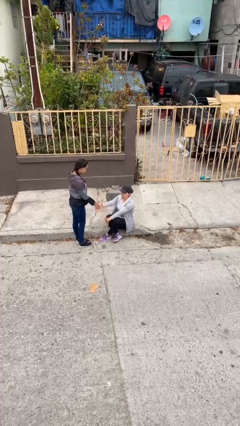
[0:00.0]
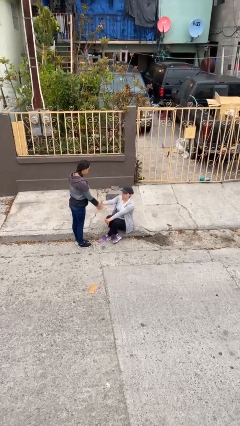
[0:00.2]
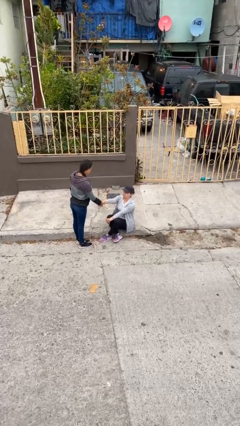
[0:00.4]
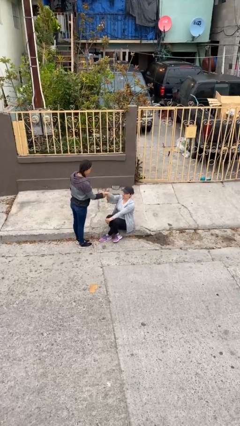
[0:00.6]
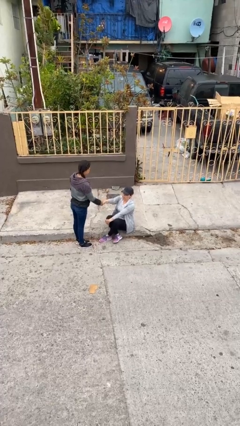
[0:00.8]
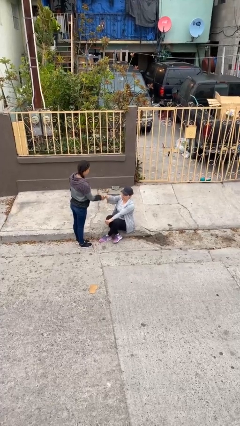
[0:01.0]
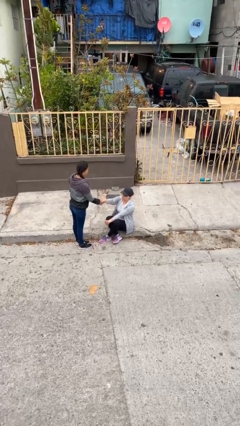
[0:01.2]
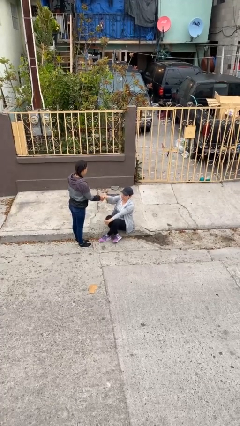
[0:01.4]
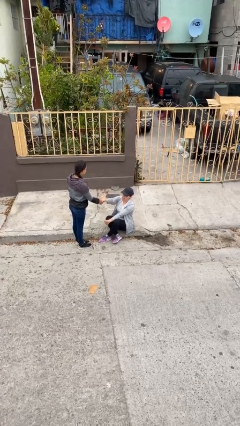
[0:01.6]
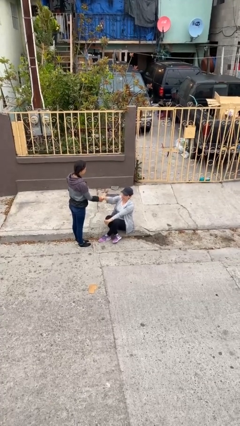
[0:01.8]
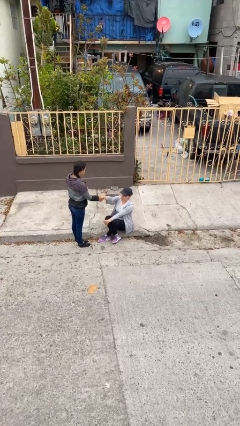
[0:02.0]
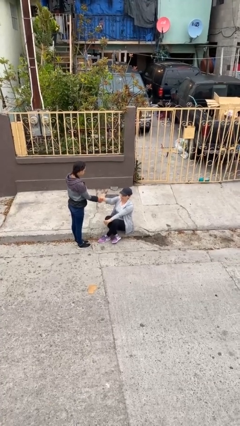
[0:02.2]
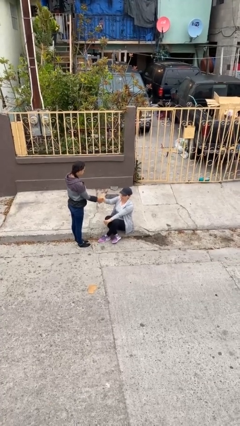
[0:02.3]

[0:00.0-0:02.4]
person shakes hand

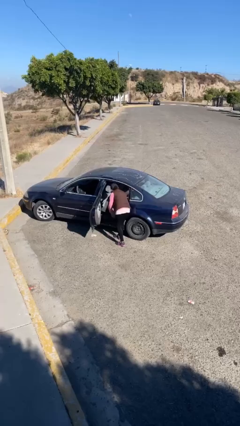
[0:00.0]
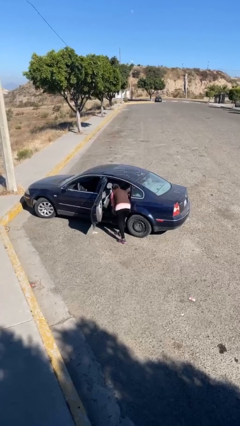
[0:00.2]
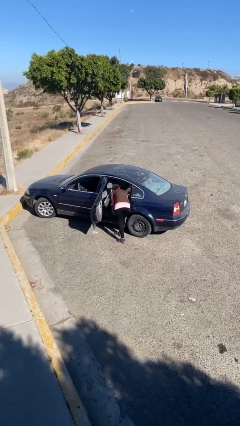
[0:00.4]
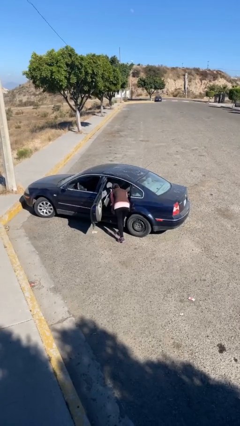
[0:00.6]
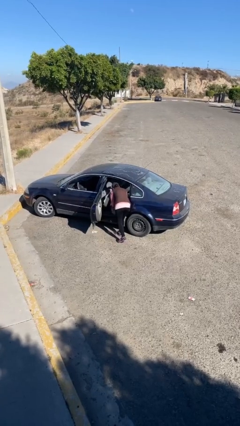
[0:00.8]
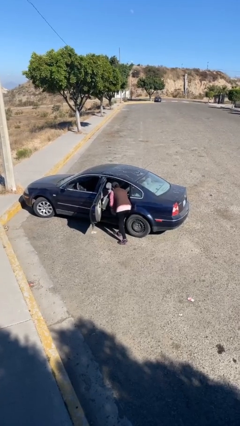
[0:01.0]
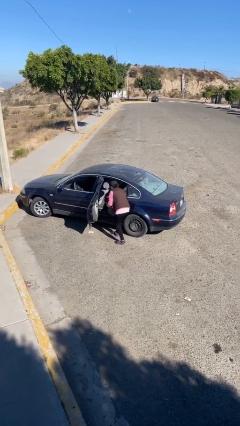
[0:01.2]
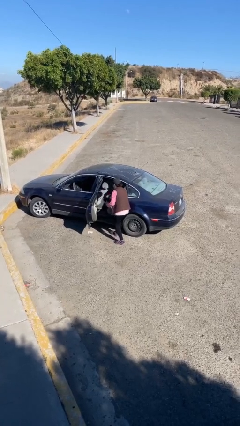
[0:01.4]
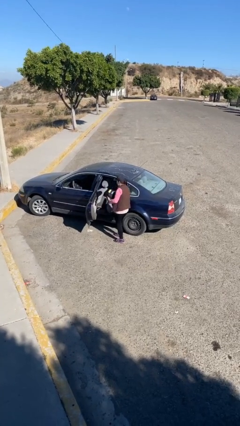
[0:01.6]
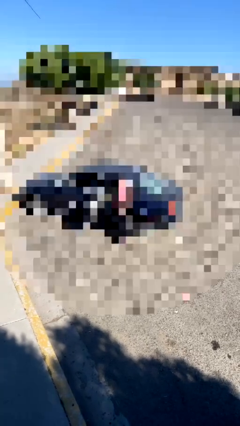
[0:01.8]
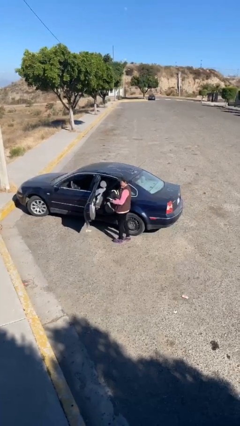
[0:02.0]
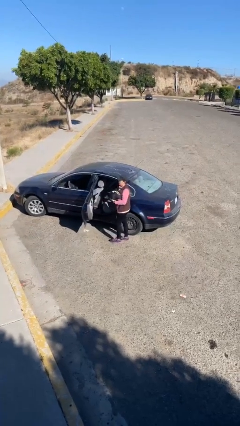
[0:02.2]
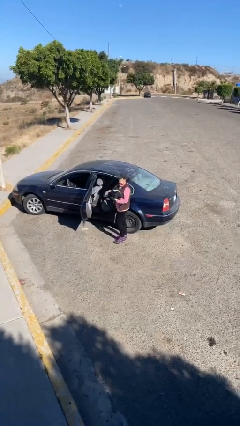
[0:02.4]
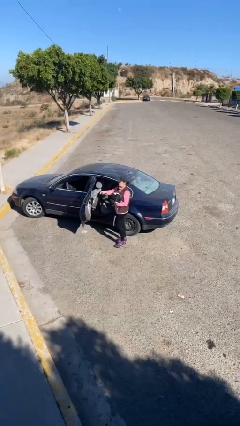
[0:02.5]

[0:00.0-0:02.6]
person unloads car

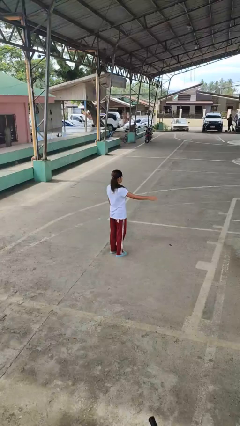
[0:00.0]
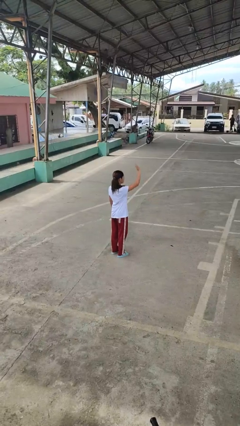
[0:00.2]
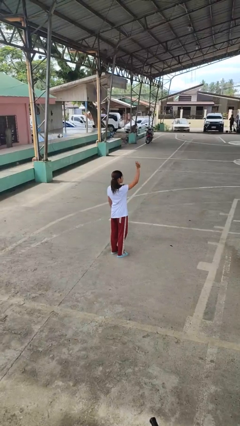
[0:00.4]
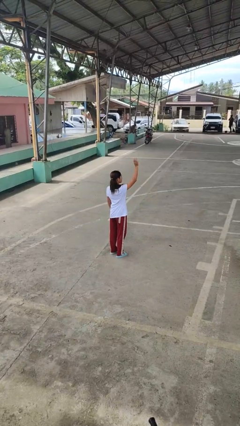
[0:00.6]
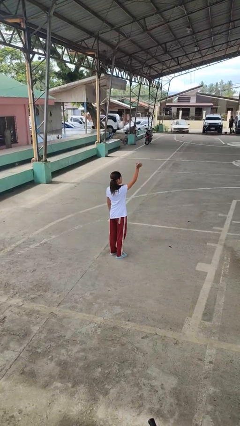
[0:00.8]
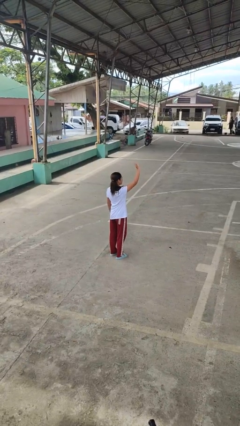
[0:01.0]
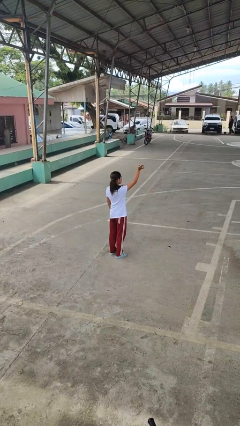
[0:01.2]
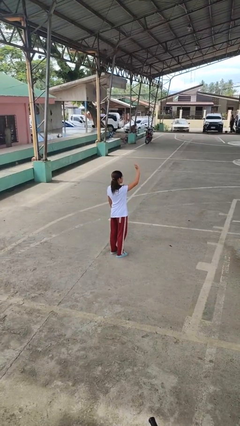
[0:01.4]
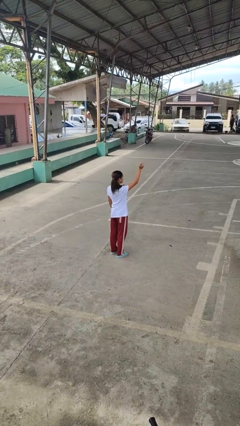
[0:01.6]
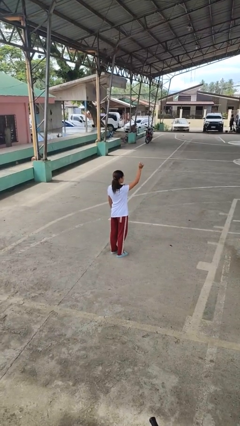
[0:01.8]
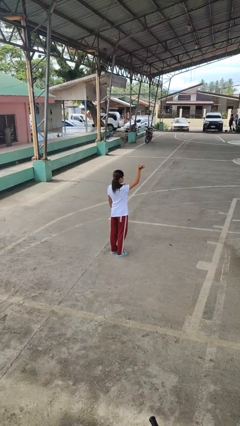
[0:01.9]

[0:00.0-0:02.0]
person waves at person

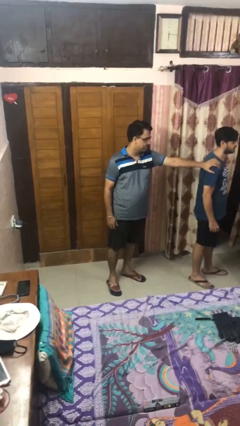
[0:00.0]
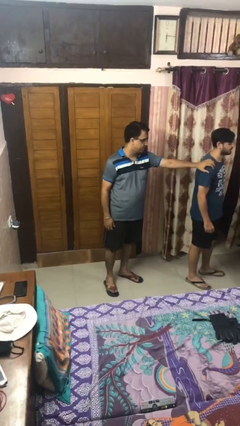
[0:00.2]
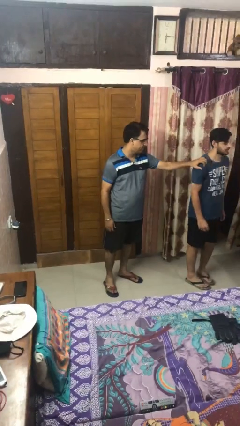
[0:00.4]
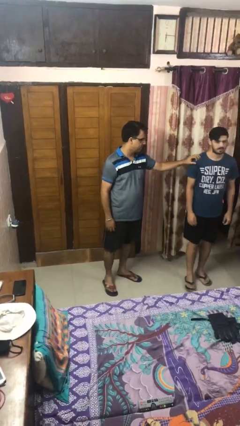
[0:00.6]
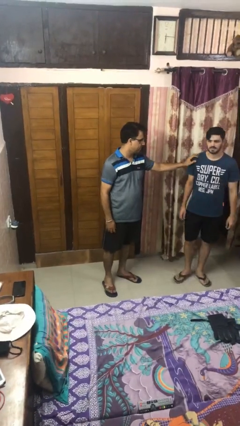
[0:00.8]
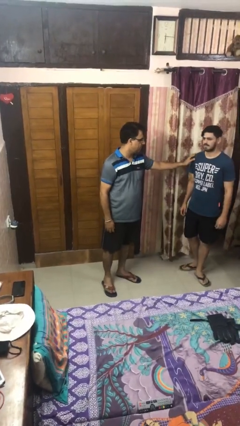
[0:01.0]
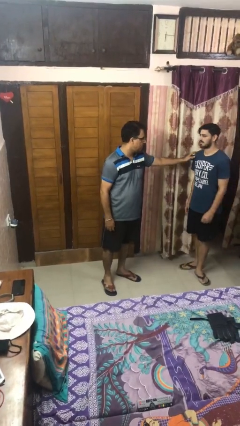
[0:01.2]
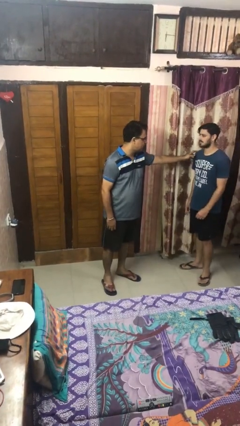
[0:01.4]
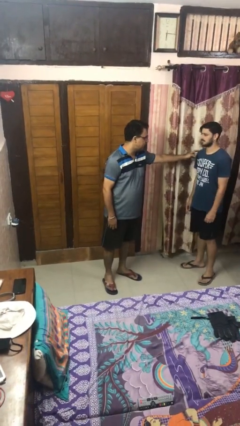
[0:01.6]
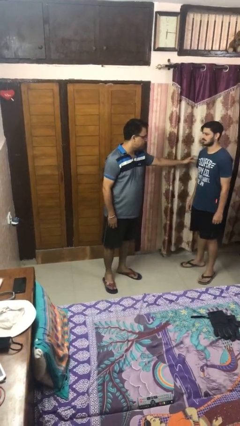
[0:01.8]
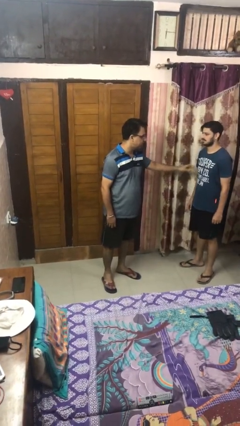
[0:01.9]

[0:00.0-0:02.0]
person spins person around

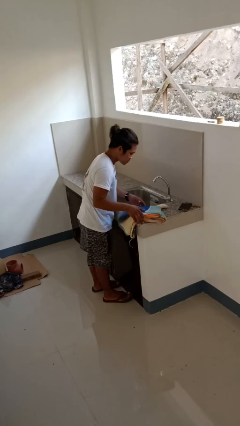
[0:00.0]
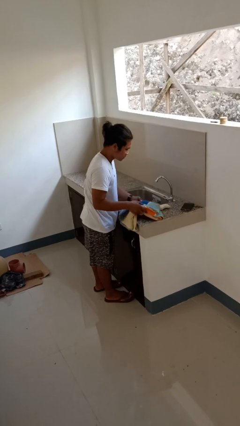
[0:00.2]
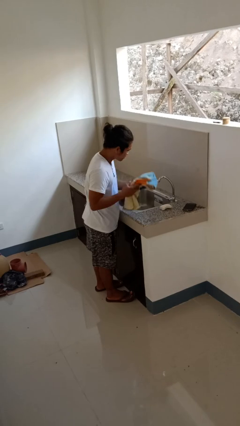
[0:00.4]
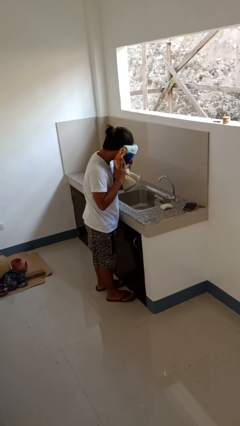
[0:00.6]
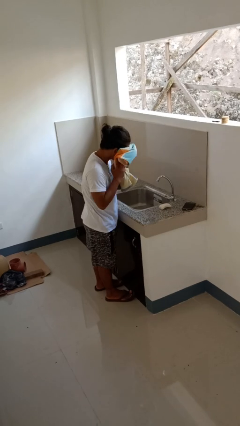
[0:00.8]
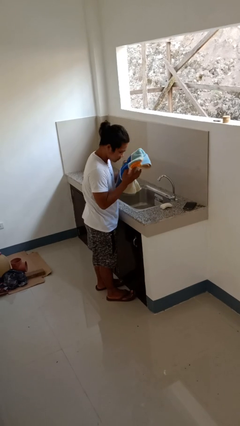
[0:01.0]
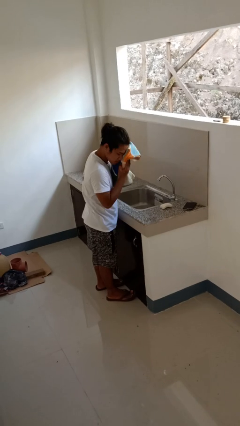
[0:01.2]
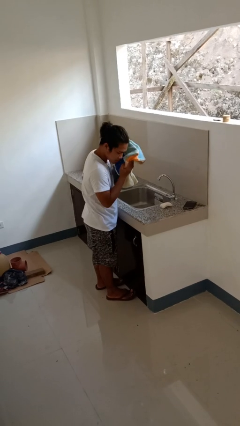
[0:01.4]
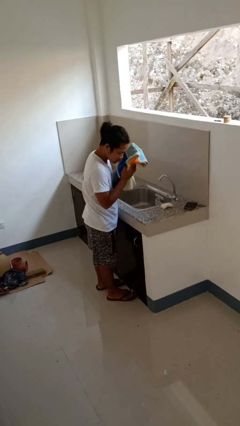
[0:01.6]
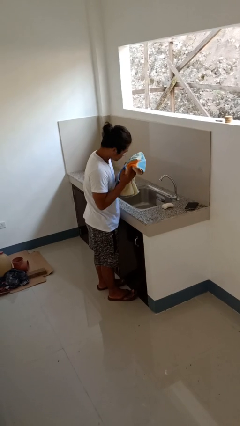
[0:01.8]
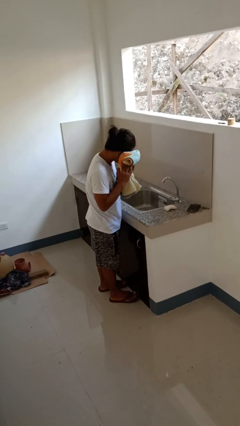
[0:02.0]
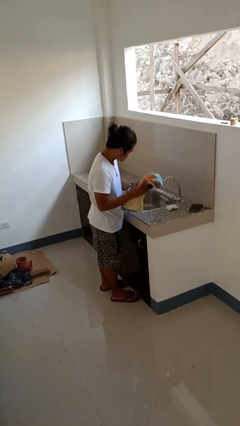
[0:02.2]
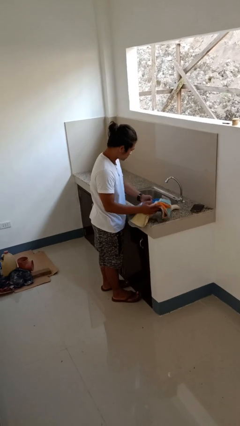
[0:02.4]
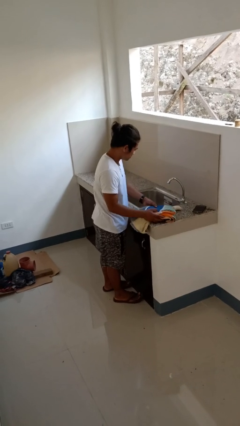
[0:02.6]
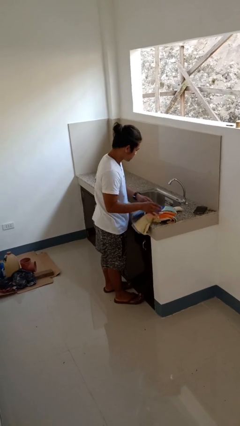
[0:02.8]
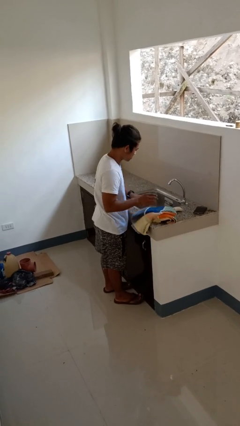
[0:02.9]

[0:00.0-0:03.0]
person dries face with towel

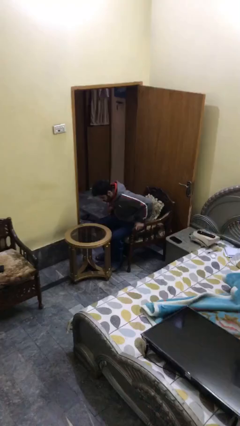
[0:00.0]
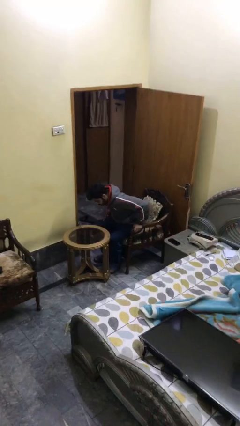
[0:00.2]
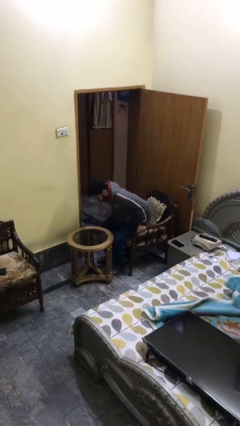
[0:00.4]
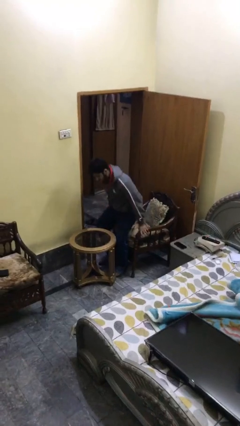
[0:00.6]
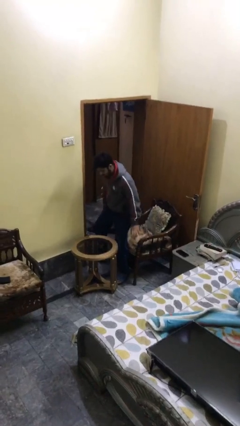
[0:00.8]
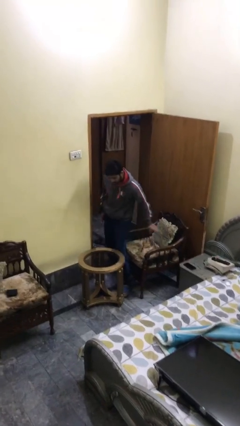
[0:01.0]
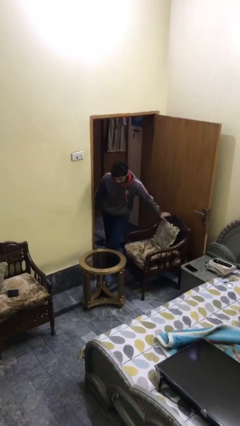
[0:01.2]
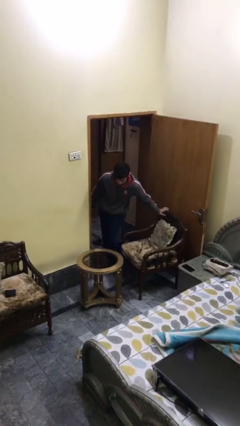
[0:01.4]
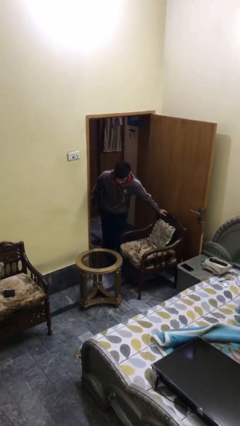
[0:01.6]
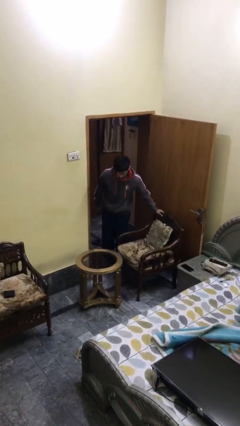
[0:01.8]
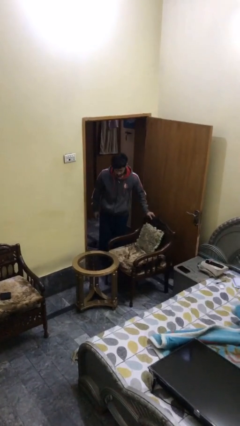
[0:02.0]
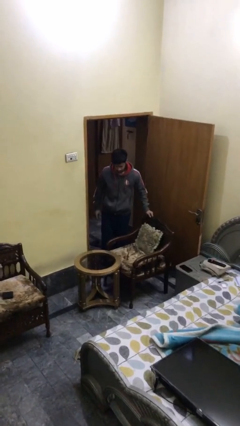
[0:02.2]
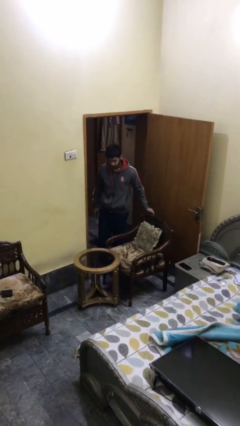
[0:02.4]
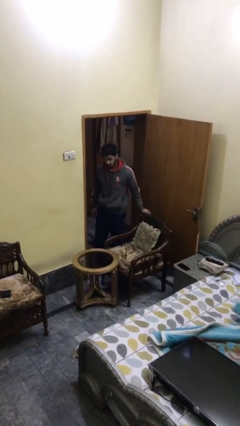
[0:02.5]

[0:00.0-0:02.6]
person stands up

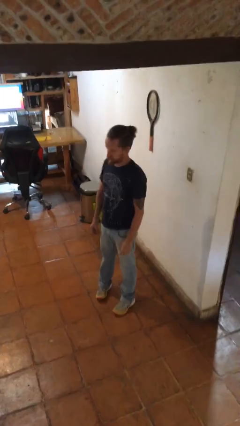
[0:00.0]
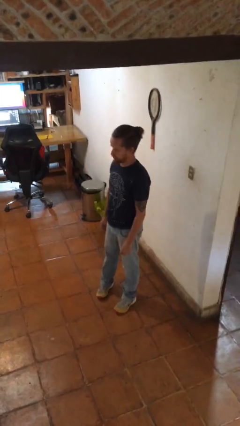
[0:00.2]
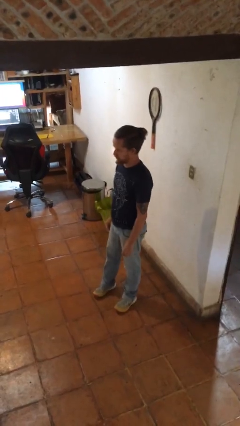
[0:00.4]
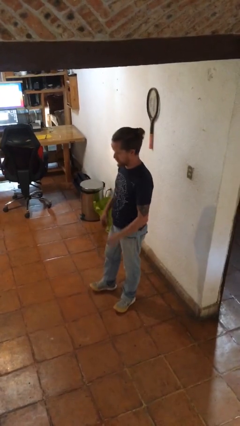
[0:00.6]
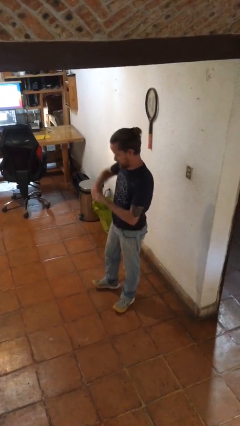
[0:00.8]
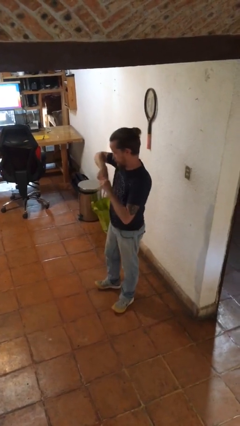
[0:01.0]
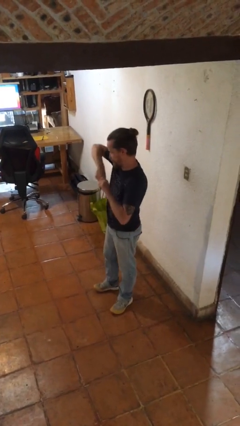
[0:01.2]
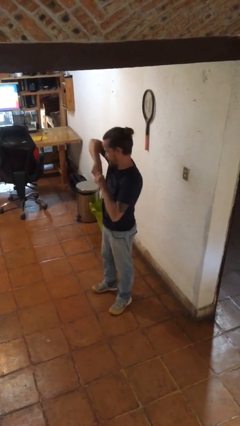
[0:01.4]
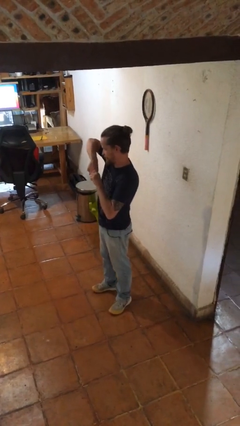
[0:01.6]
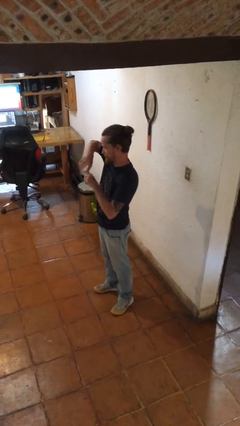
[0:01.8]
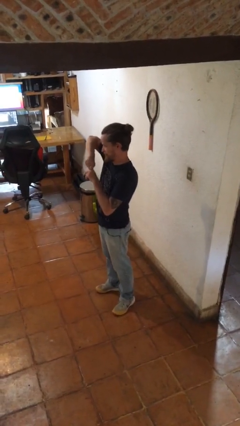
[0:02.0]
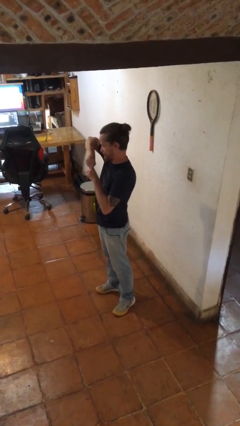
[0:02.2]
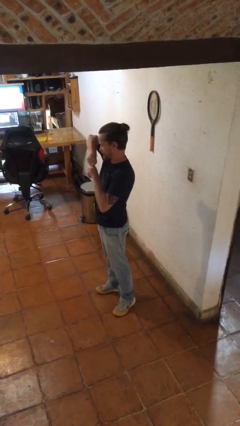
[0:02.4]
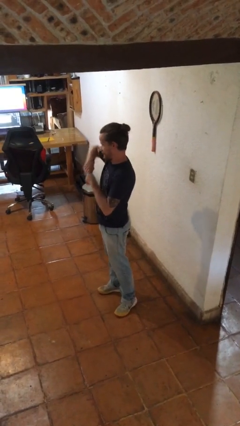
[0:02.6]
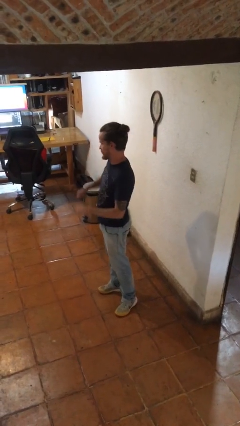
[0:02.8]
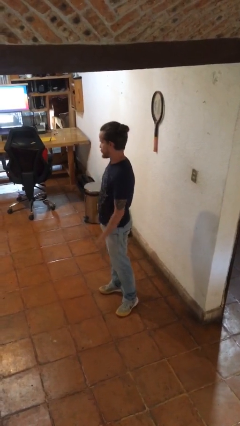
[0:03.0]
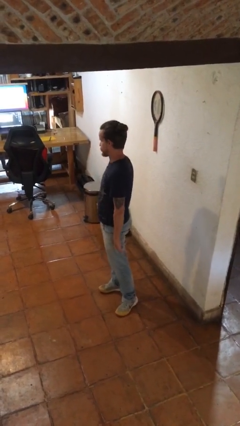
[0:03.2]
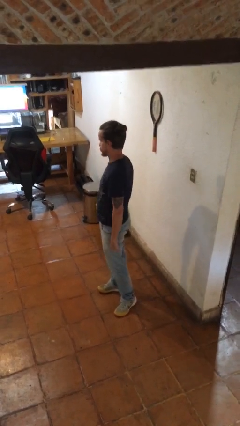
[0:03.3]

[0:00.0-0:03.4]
person cracks knuckles
